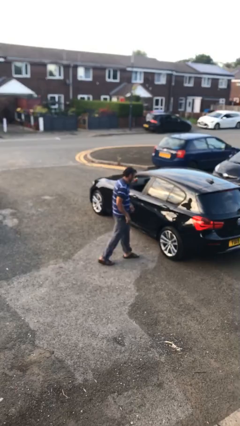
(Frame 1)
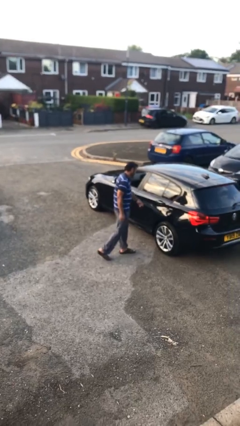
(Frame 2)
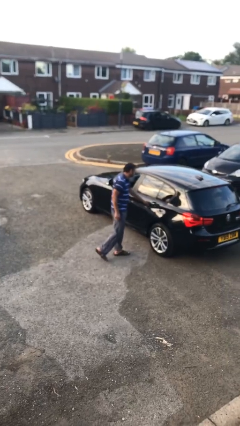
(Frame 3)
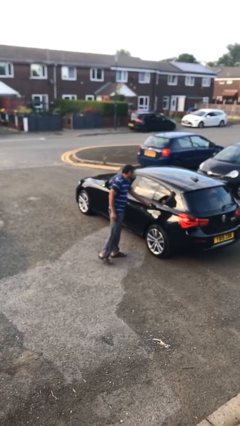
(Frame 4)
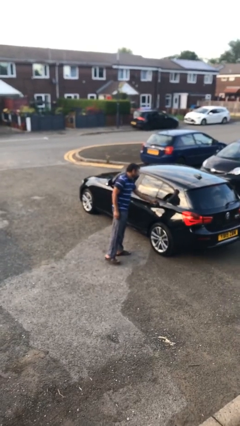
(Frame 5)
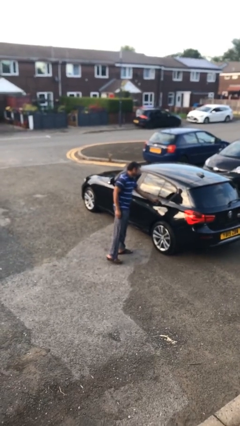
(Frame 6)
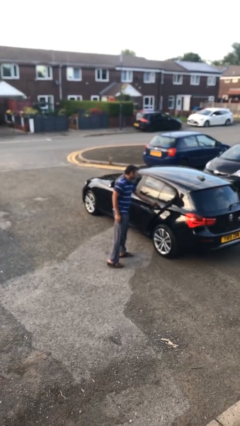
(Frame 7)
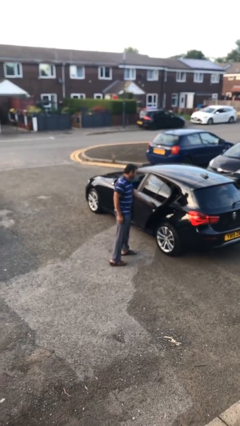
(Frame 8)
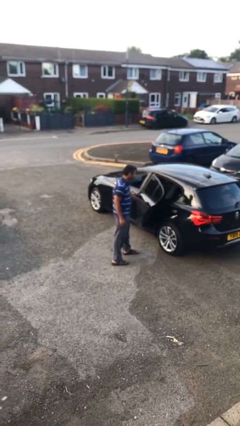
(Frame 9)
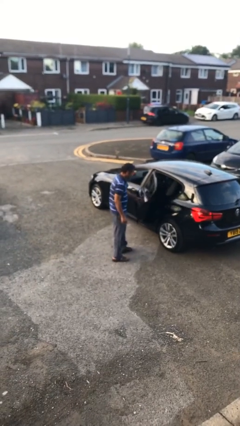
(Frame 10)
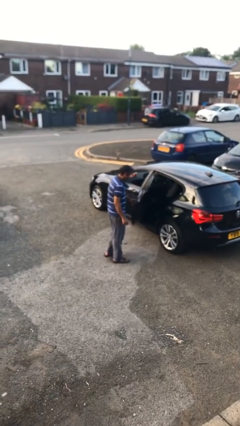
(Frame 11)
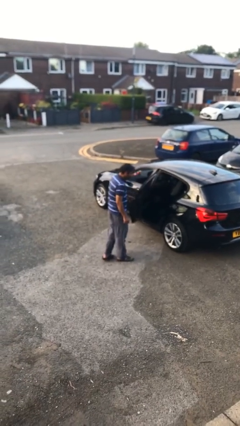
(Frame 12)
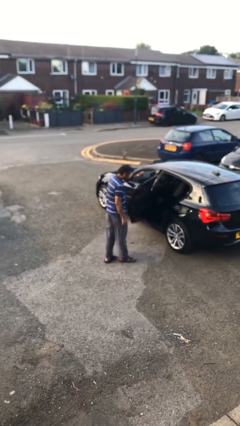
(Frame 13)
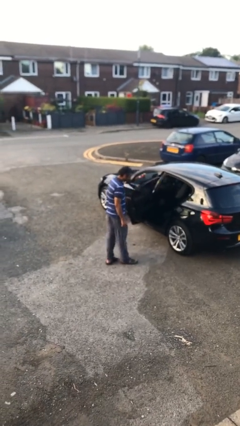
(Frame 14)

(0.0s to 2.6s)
person opens car door

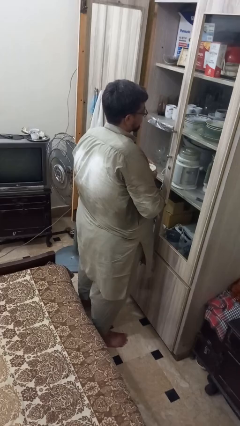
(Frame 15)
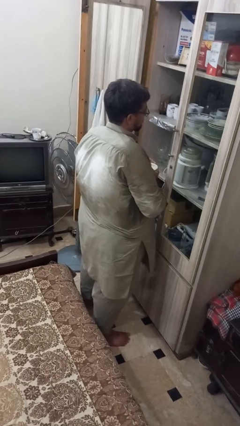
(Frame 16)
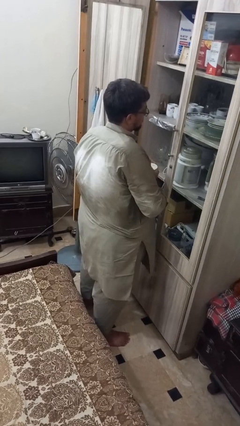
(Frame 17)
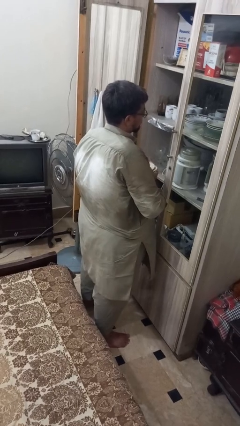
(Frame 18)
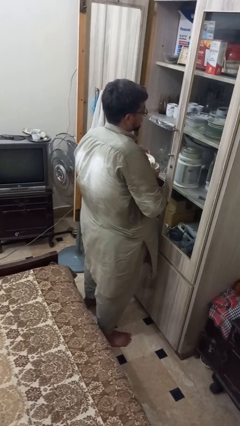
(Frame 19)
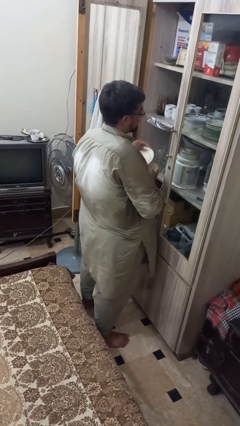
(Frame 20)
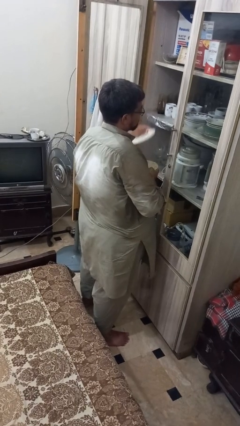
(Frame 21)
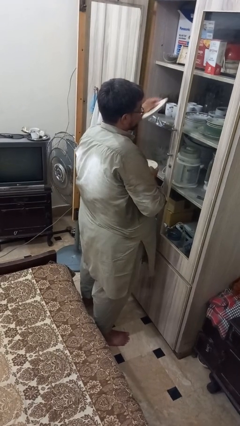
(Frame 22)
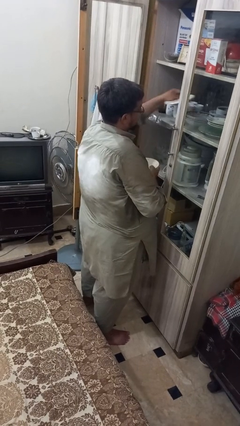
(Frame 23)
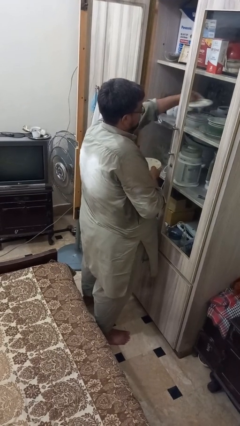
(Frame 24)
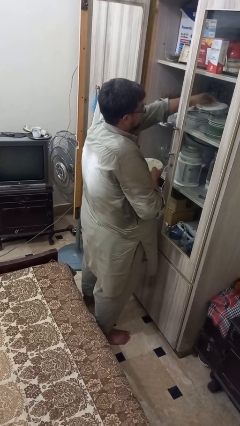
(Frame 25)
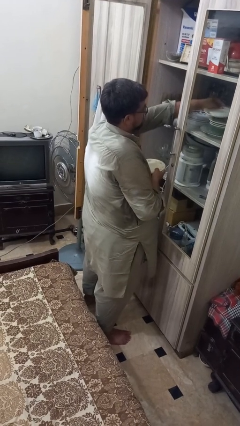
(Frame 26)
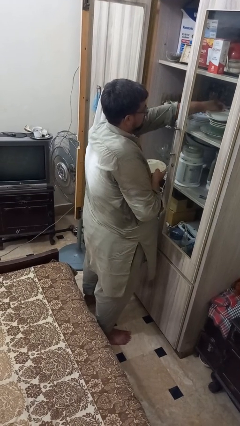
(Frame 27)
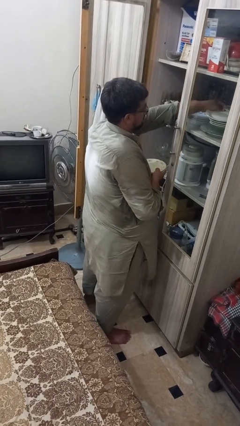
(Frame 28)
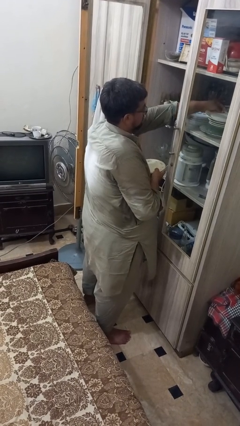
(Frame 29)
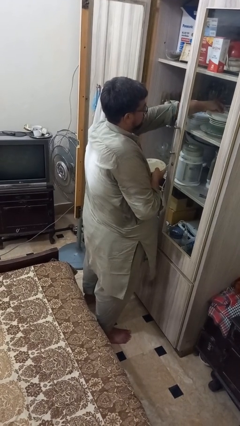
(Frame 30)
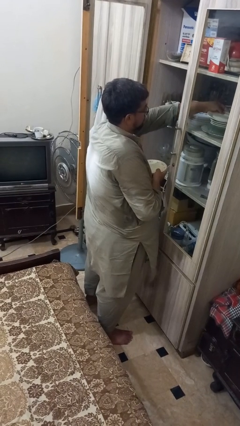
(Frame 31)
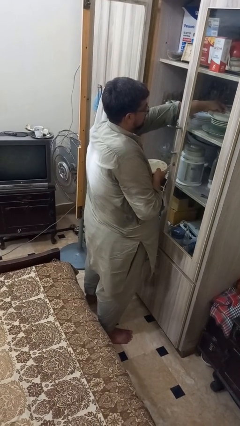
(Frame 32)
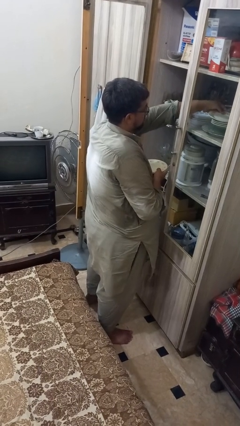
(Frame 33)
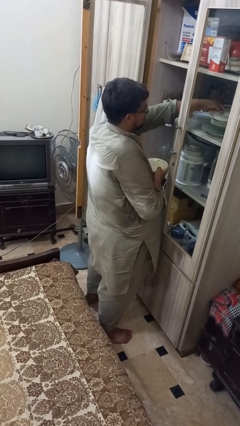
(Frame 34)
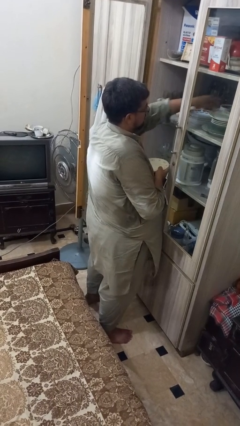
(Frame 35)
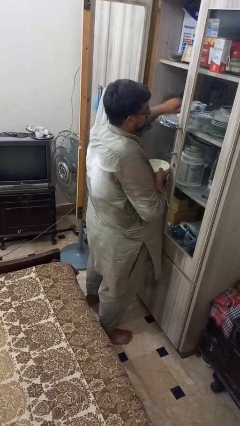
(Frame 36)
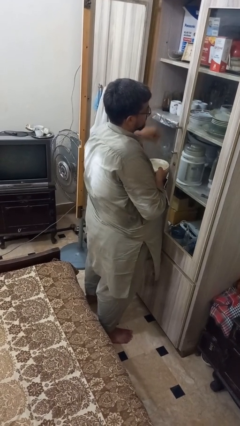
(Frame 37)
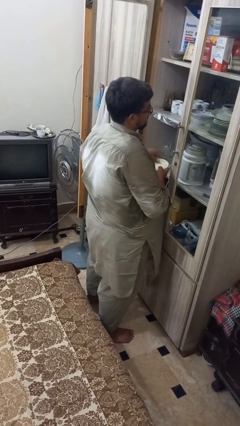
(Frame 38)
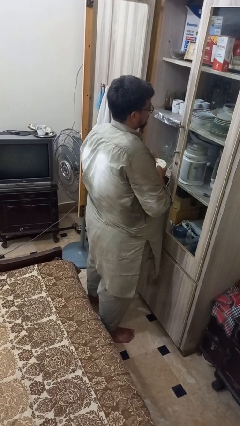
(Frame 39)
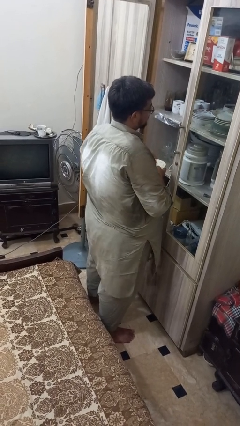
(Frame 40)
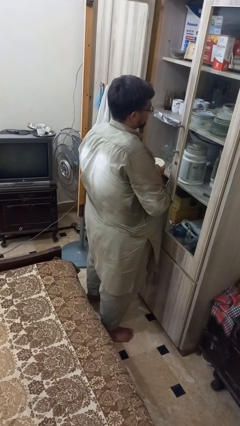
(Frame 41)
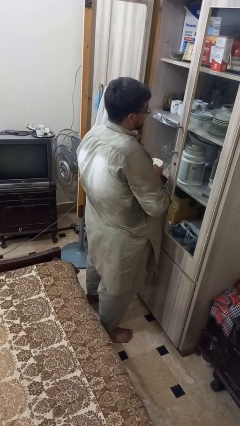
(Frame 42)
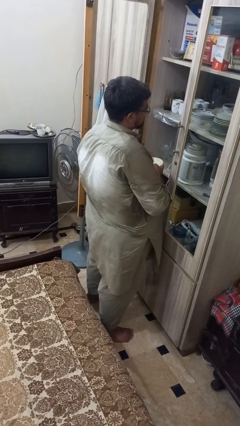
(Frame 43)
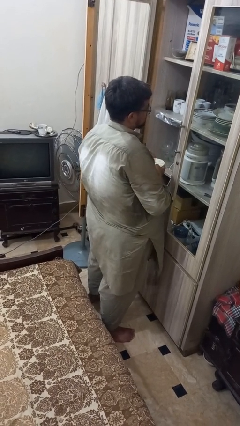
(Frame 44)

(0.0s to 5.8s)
person loads groceries into cabinet

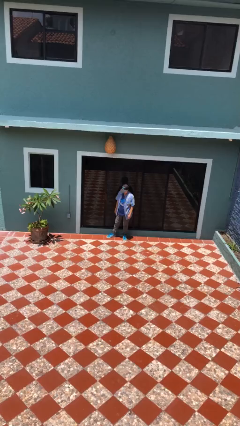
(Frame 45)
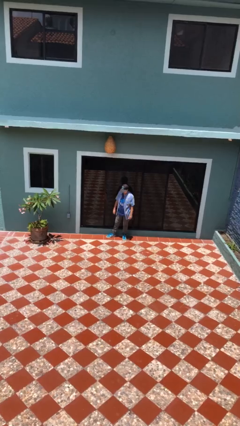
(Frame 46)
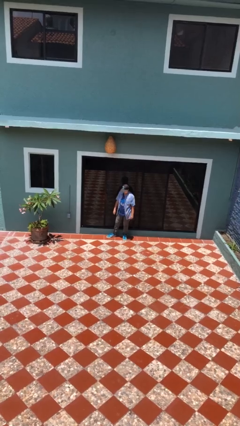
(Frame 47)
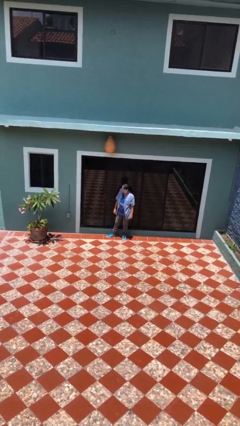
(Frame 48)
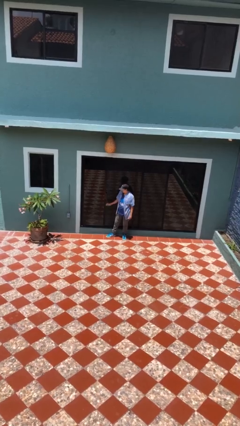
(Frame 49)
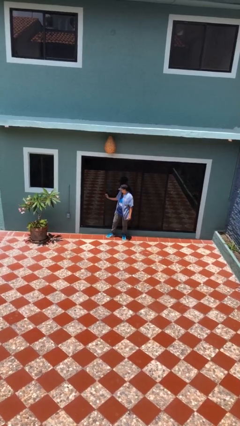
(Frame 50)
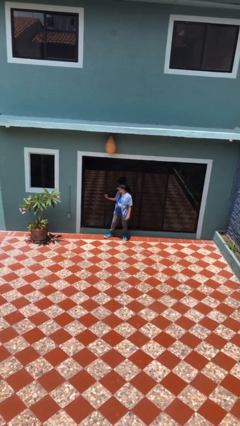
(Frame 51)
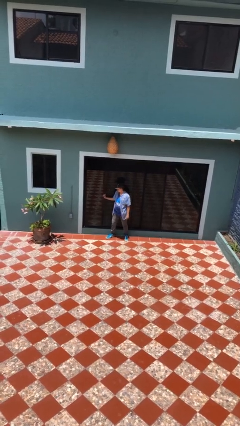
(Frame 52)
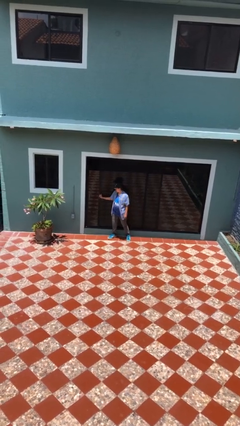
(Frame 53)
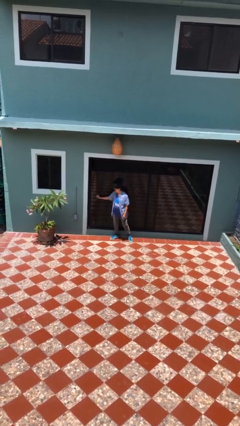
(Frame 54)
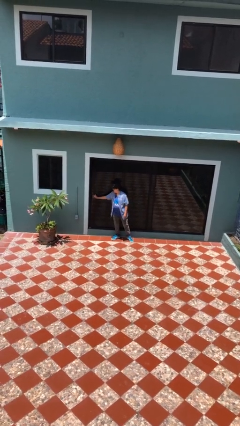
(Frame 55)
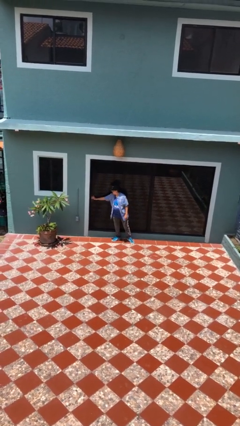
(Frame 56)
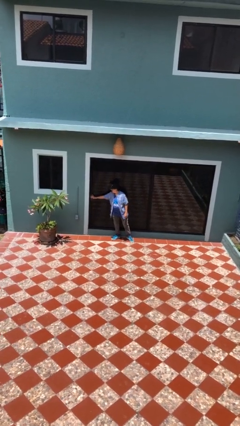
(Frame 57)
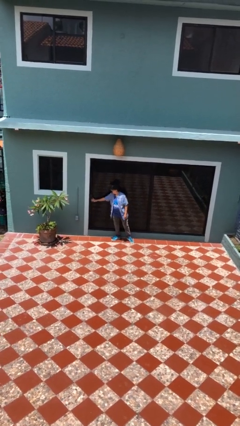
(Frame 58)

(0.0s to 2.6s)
person closes sliding door

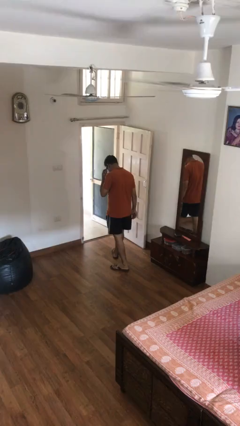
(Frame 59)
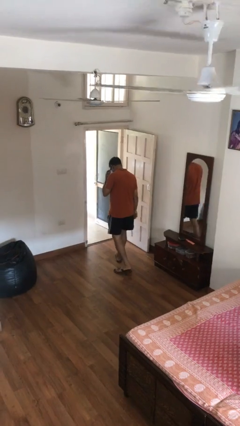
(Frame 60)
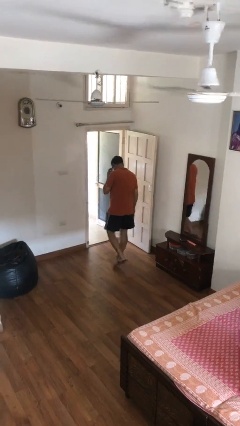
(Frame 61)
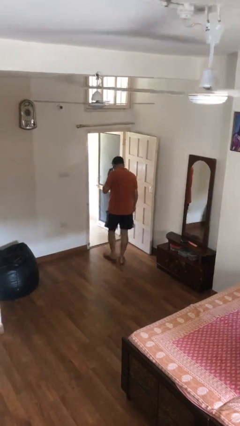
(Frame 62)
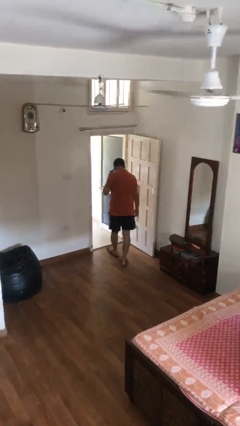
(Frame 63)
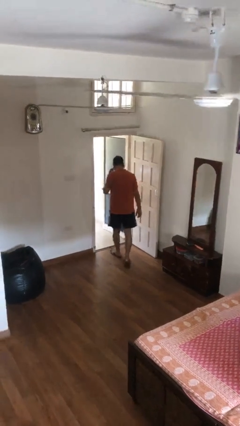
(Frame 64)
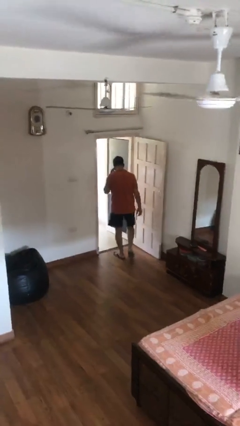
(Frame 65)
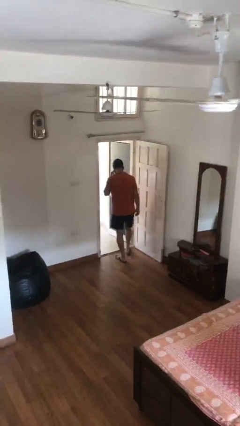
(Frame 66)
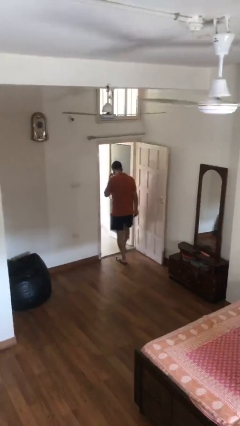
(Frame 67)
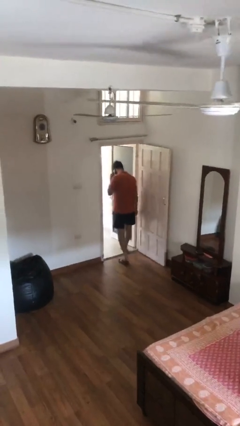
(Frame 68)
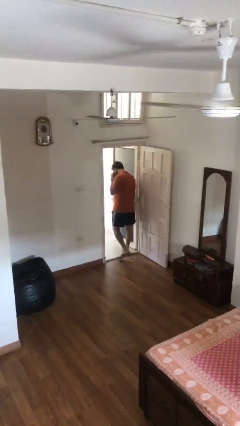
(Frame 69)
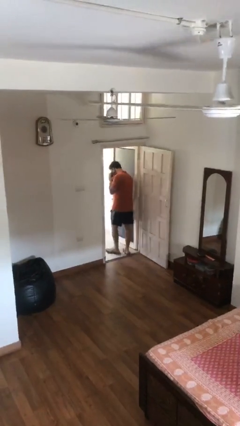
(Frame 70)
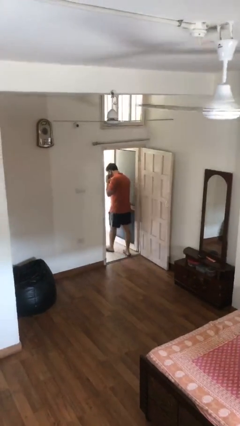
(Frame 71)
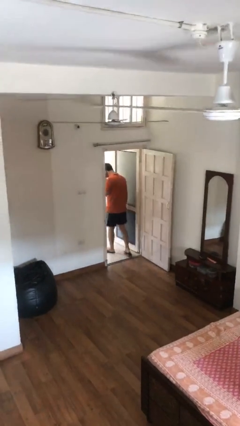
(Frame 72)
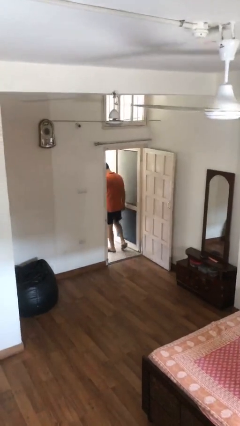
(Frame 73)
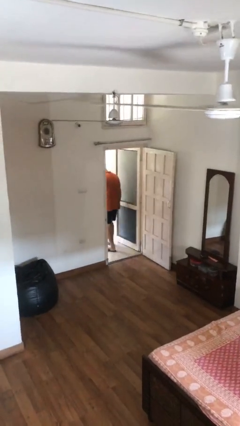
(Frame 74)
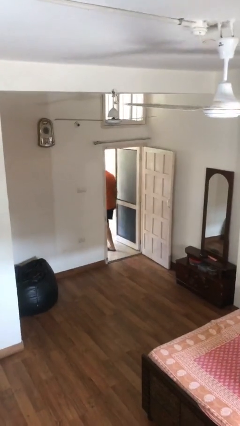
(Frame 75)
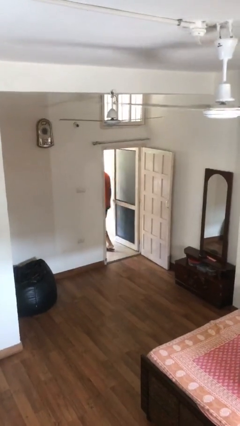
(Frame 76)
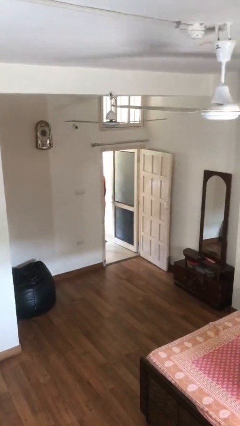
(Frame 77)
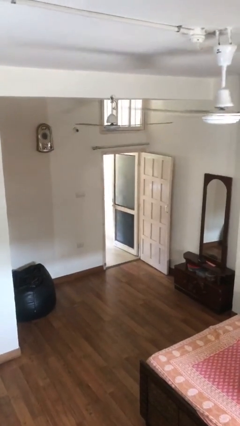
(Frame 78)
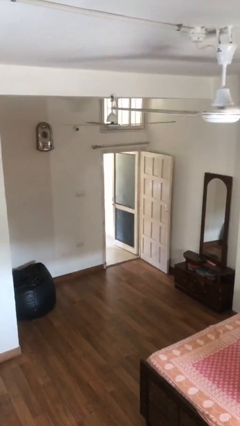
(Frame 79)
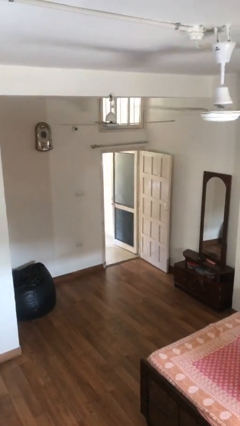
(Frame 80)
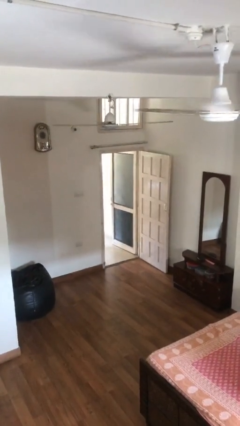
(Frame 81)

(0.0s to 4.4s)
person exits scene through structure

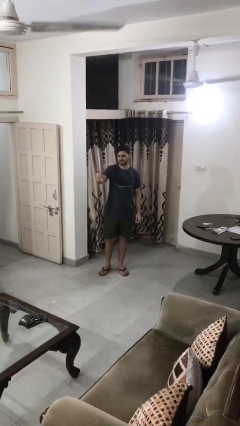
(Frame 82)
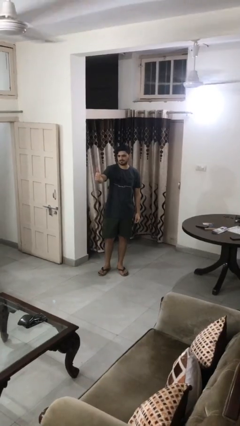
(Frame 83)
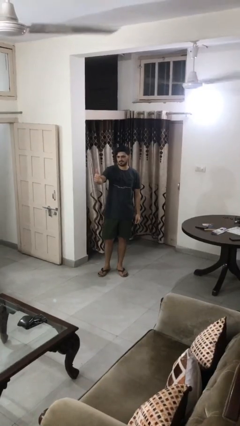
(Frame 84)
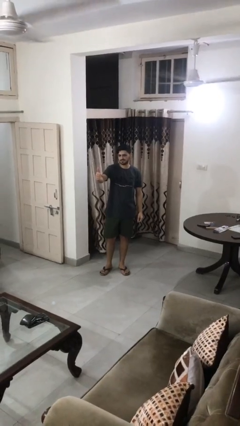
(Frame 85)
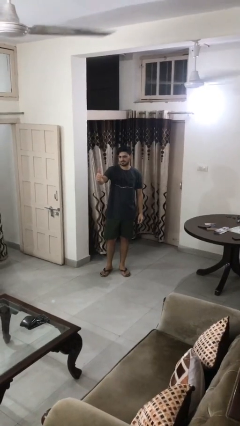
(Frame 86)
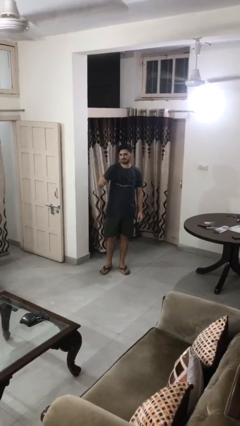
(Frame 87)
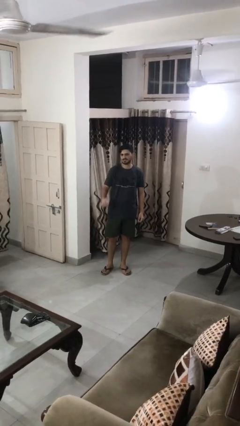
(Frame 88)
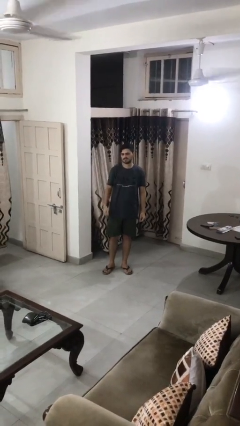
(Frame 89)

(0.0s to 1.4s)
person gestures thumbs up

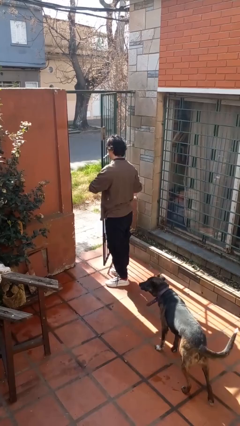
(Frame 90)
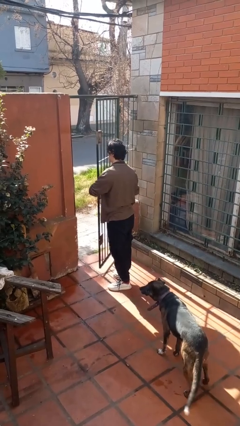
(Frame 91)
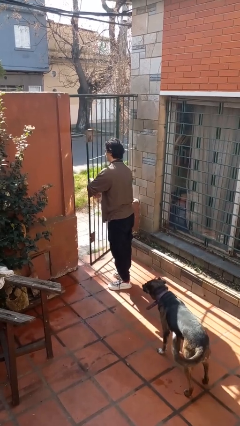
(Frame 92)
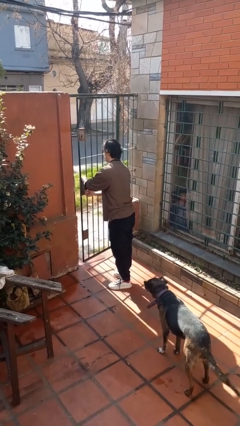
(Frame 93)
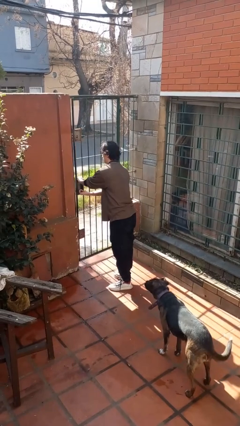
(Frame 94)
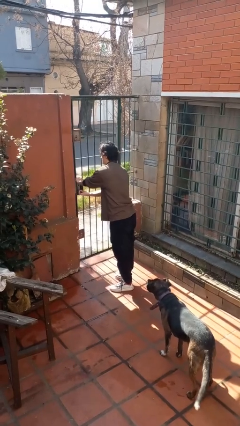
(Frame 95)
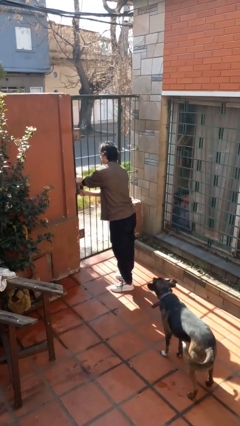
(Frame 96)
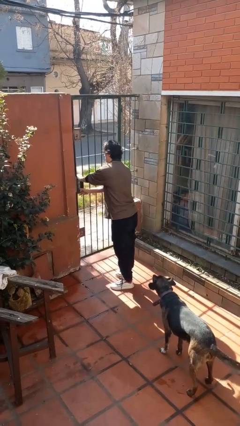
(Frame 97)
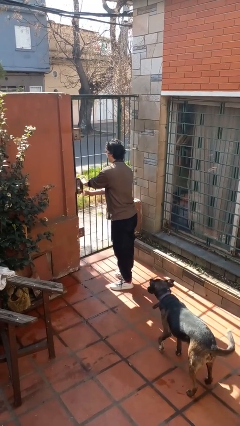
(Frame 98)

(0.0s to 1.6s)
person closes gate
